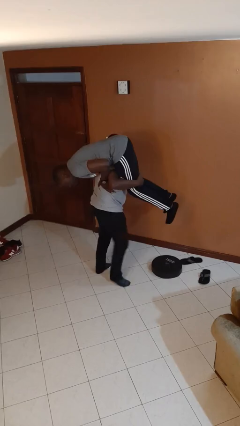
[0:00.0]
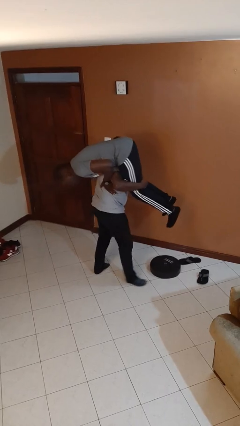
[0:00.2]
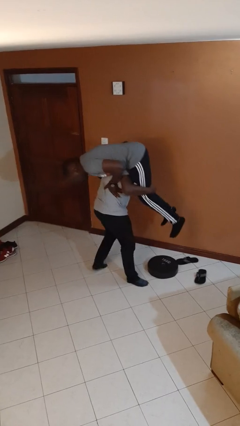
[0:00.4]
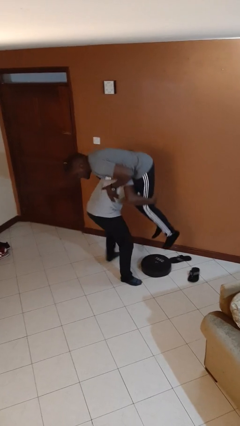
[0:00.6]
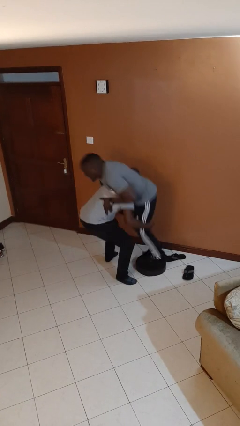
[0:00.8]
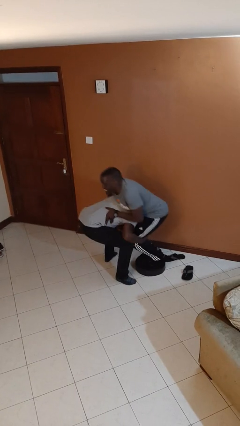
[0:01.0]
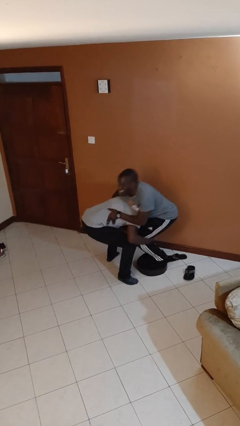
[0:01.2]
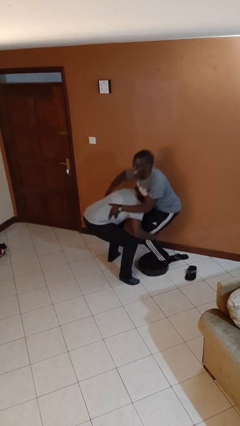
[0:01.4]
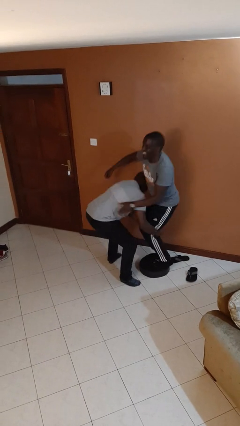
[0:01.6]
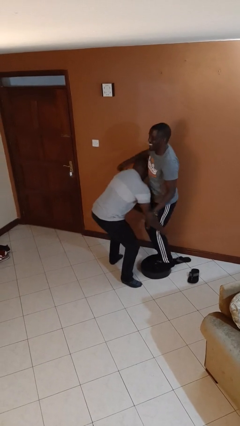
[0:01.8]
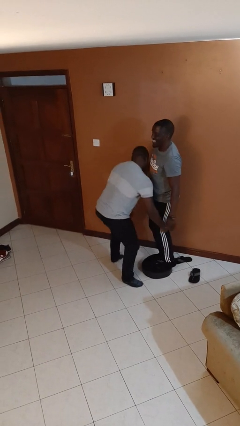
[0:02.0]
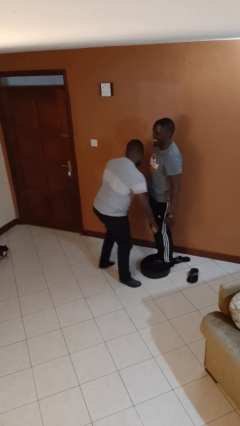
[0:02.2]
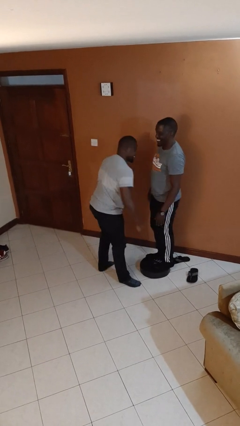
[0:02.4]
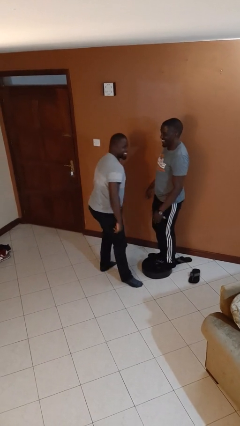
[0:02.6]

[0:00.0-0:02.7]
person puts down person

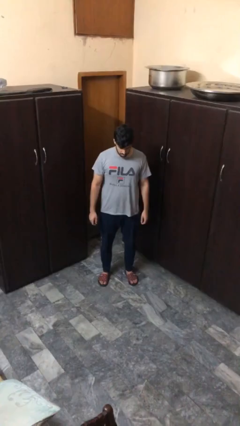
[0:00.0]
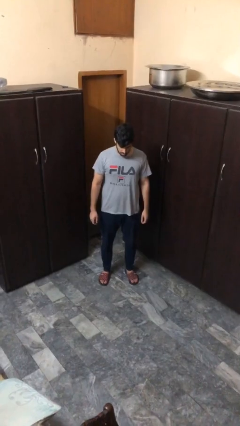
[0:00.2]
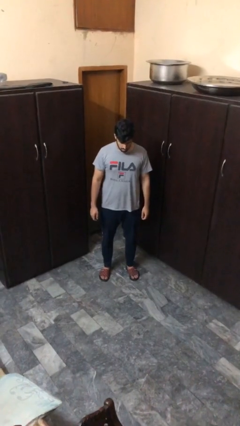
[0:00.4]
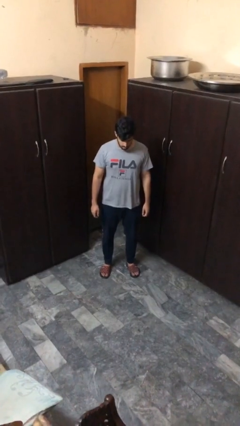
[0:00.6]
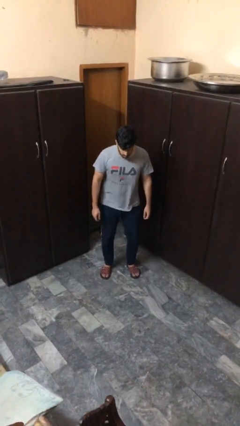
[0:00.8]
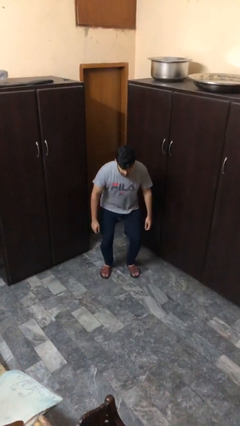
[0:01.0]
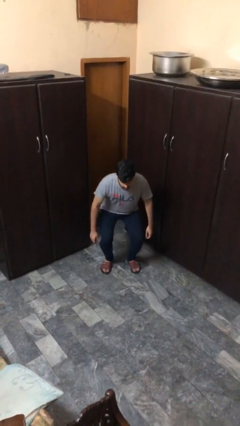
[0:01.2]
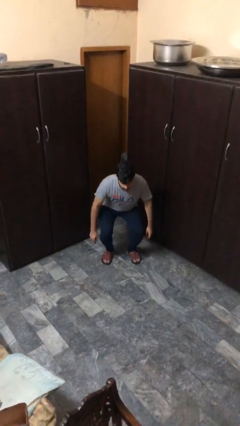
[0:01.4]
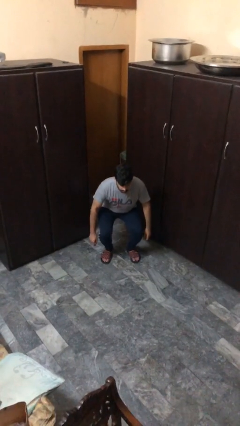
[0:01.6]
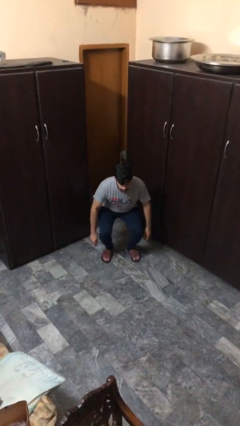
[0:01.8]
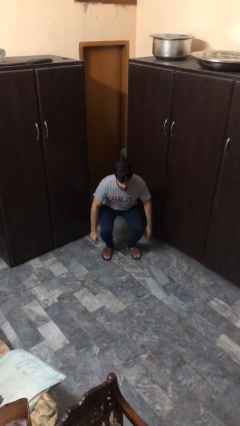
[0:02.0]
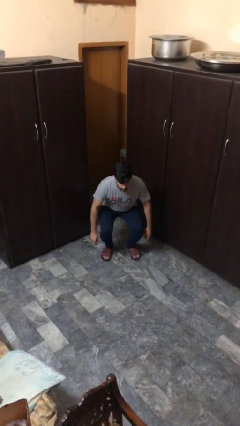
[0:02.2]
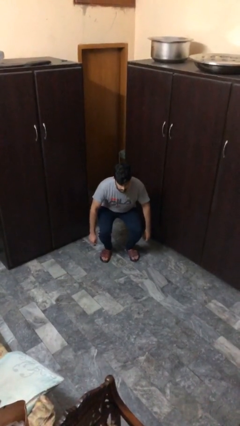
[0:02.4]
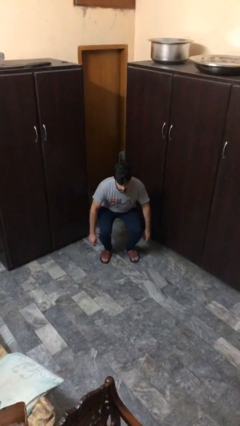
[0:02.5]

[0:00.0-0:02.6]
person squats

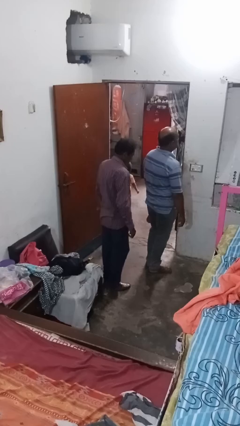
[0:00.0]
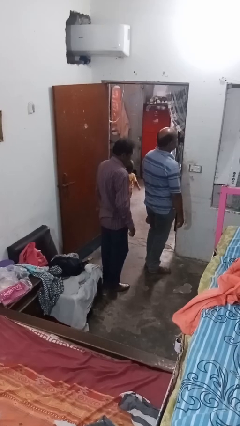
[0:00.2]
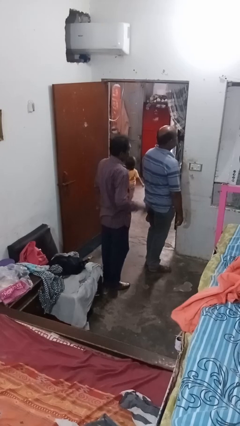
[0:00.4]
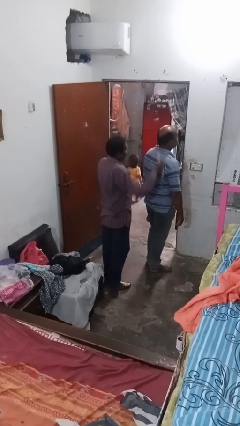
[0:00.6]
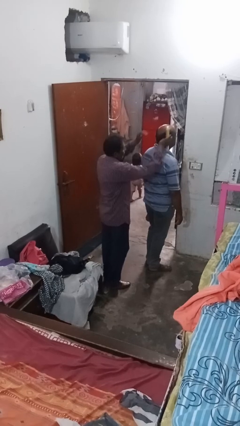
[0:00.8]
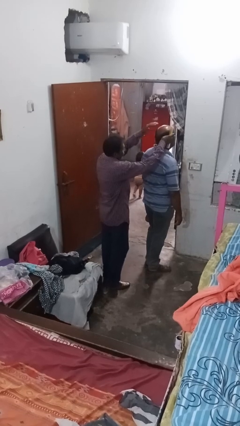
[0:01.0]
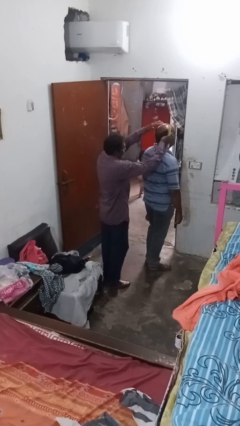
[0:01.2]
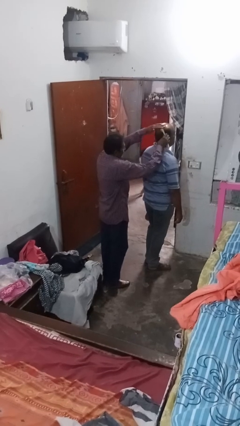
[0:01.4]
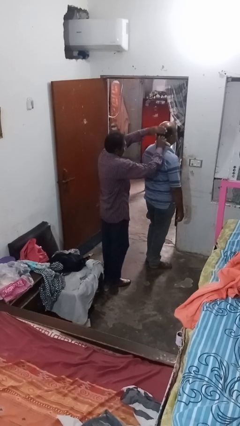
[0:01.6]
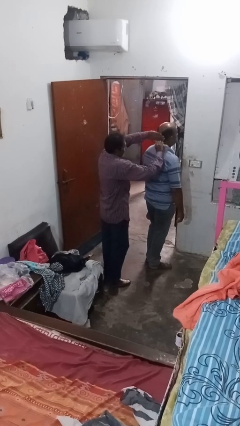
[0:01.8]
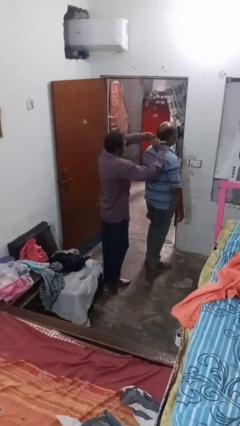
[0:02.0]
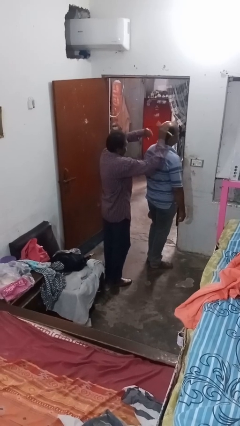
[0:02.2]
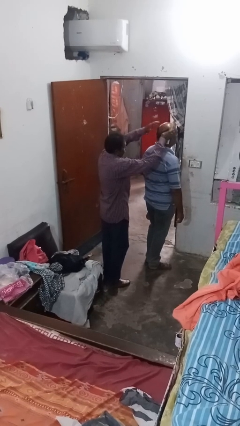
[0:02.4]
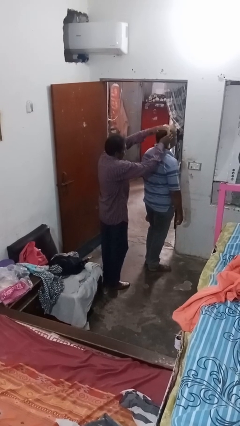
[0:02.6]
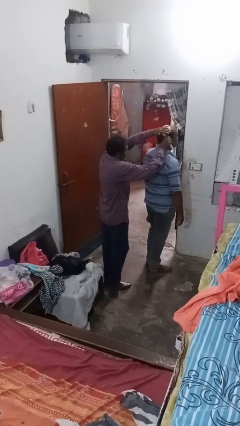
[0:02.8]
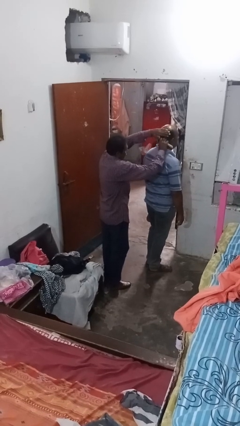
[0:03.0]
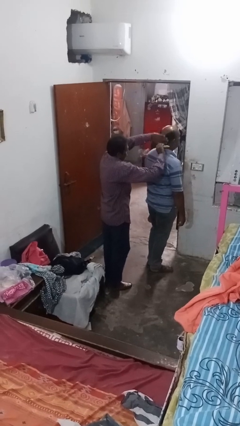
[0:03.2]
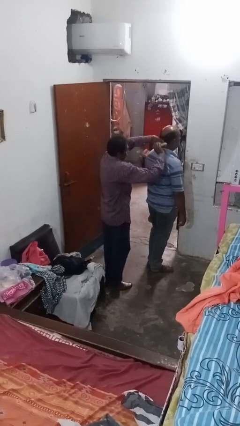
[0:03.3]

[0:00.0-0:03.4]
person brushes hair of person

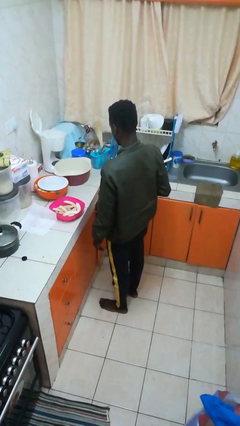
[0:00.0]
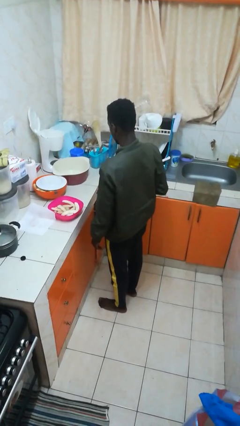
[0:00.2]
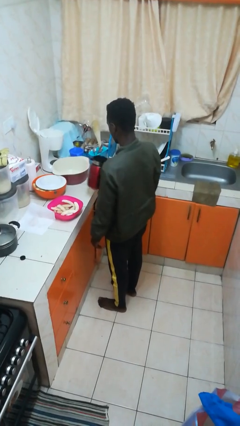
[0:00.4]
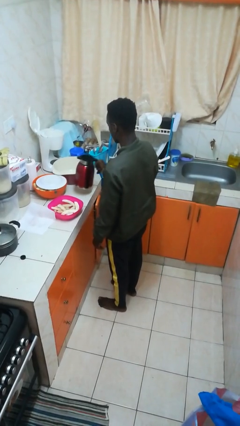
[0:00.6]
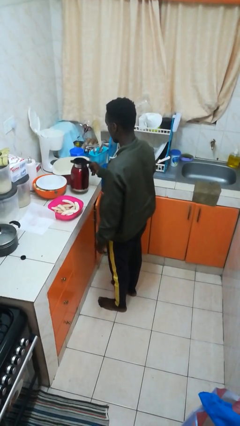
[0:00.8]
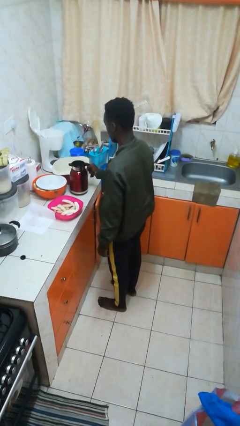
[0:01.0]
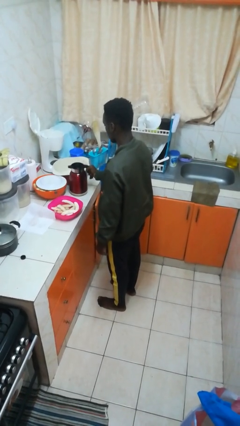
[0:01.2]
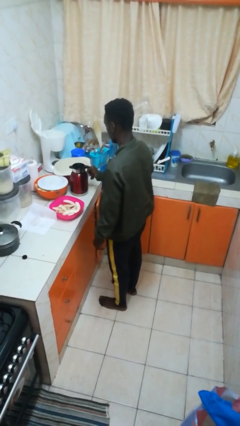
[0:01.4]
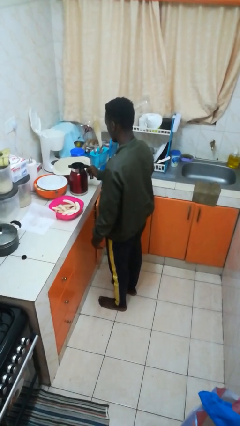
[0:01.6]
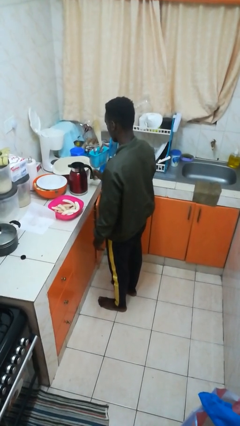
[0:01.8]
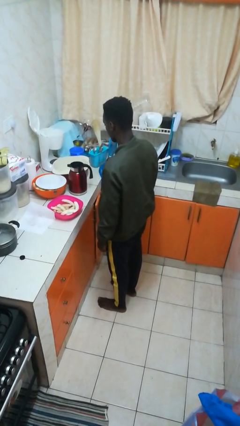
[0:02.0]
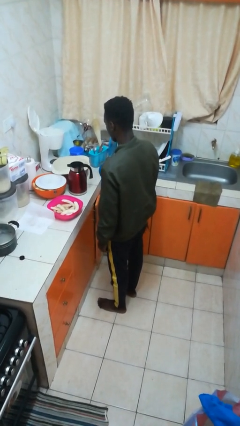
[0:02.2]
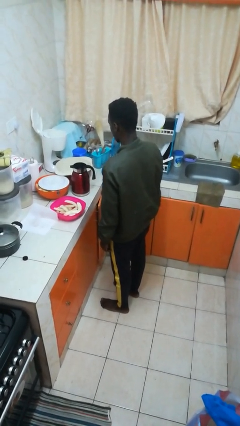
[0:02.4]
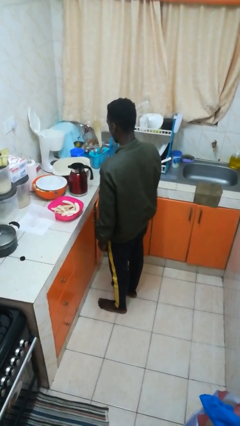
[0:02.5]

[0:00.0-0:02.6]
person puts down object on countertop

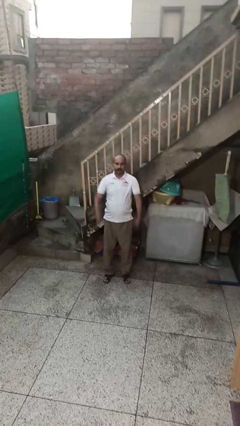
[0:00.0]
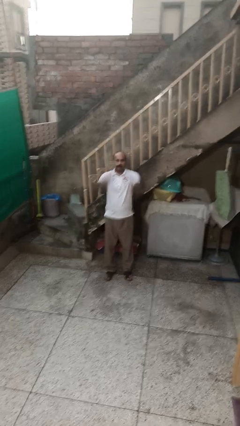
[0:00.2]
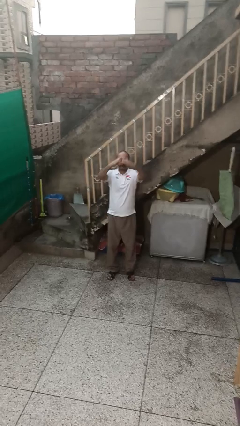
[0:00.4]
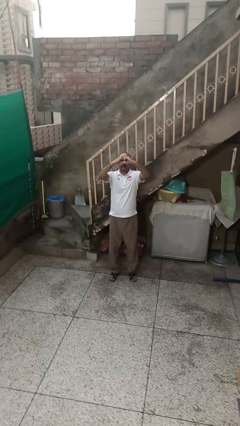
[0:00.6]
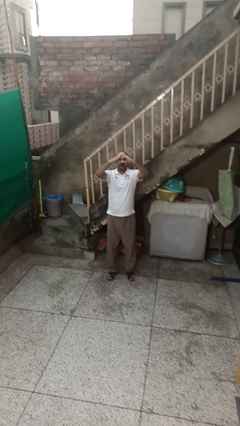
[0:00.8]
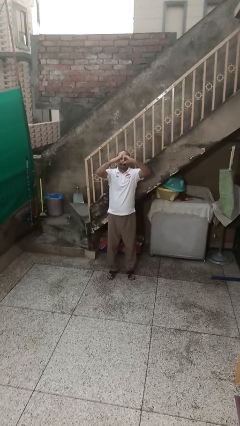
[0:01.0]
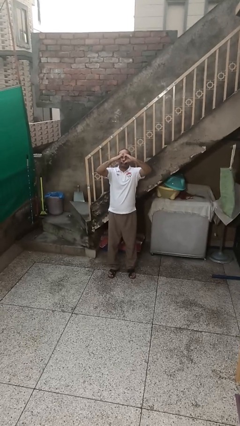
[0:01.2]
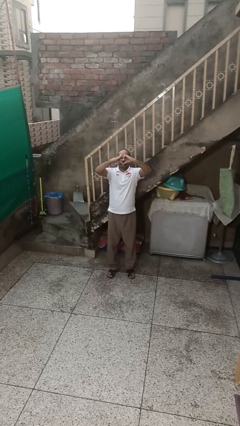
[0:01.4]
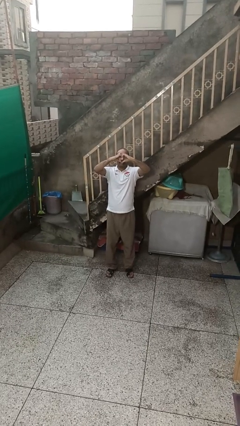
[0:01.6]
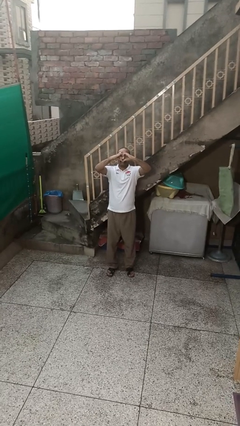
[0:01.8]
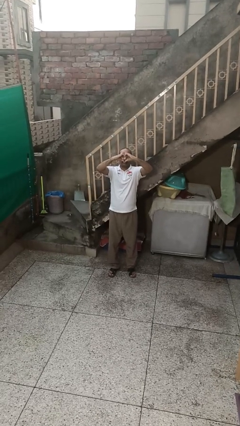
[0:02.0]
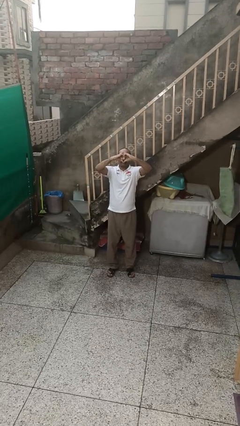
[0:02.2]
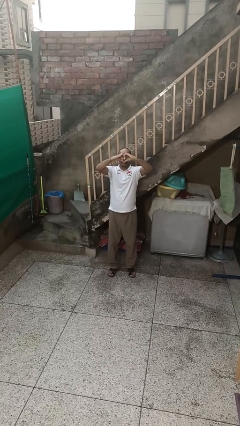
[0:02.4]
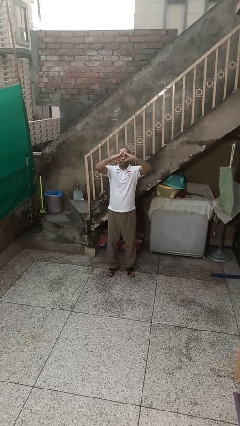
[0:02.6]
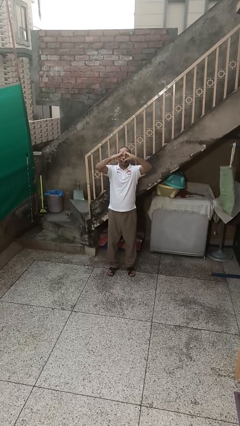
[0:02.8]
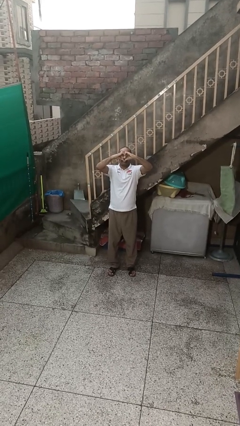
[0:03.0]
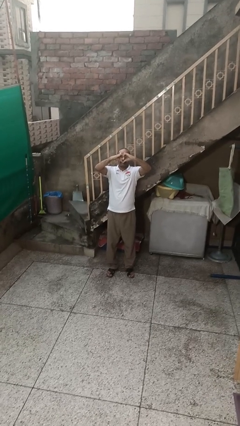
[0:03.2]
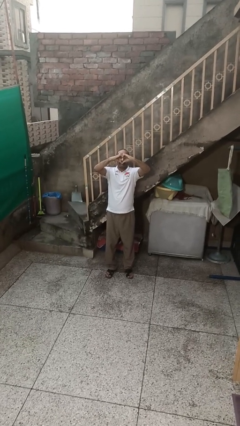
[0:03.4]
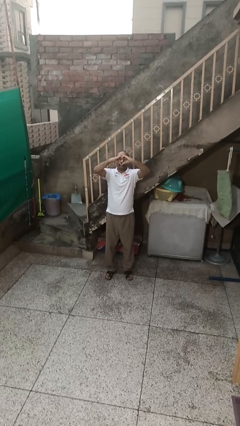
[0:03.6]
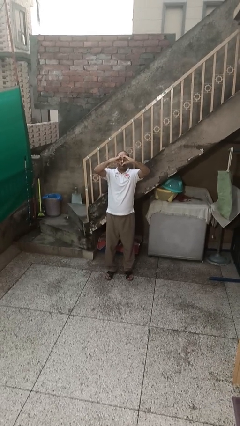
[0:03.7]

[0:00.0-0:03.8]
person gestures heart

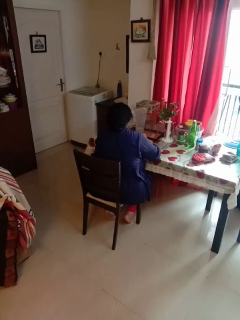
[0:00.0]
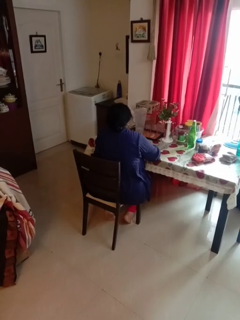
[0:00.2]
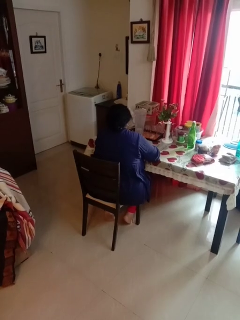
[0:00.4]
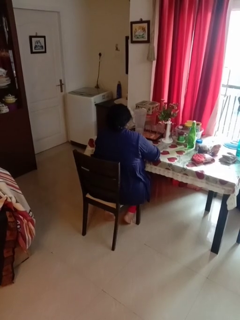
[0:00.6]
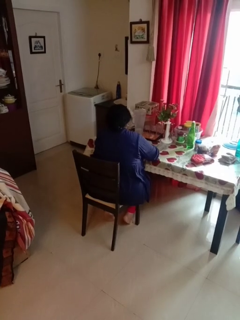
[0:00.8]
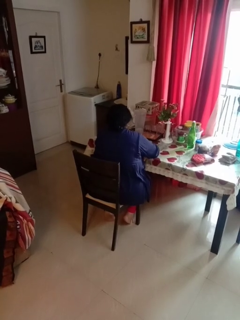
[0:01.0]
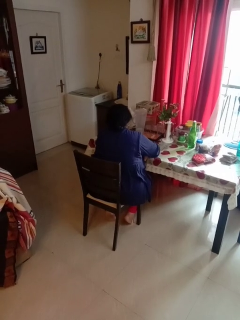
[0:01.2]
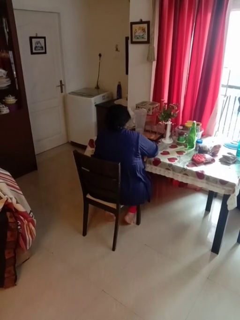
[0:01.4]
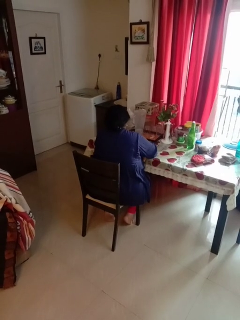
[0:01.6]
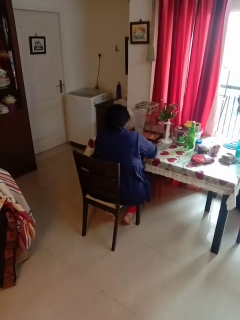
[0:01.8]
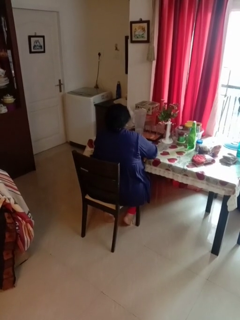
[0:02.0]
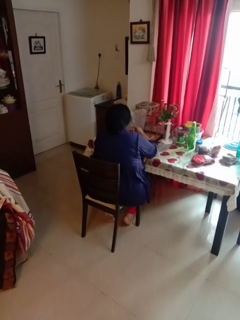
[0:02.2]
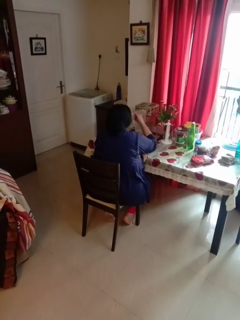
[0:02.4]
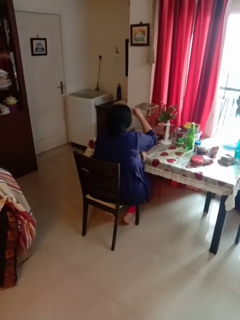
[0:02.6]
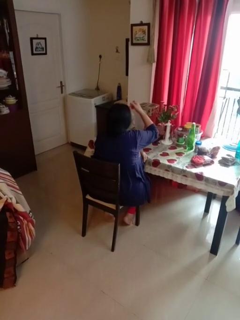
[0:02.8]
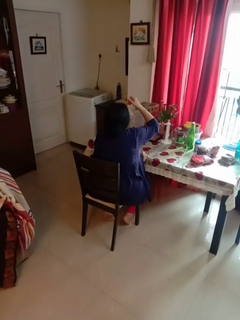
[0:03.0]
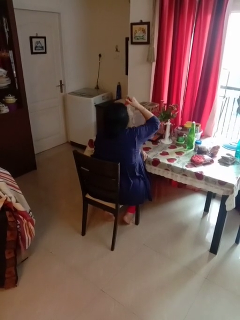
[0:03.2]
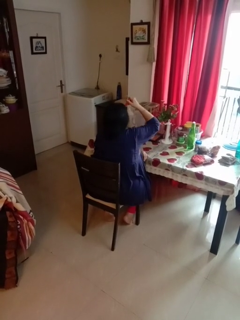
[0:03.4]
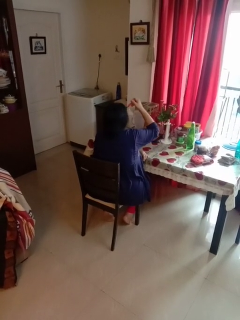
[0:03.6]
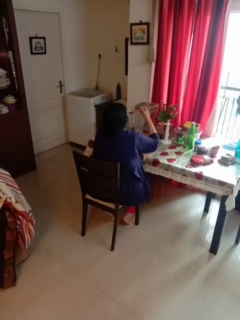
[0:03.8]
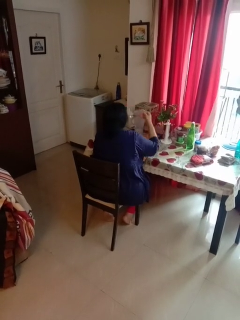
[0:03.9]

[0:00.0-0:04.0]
person eats with utensil
